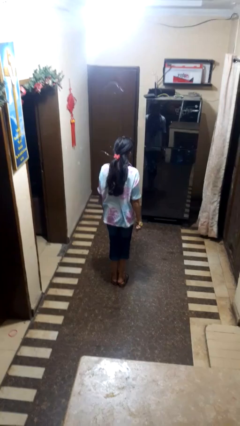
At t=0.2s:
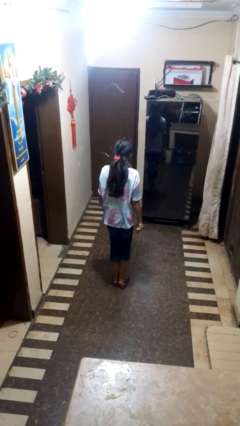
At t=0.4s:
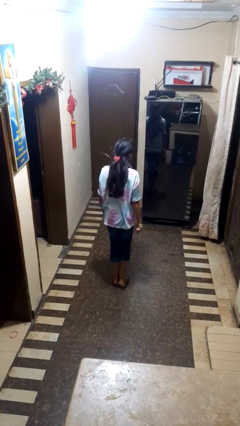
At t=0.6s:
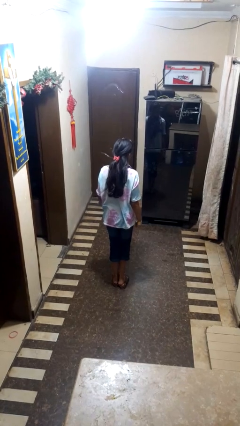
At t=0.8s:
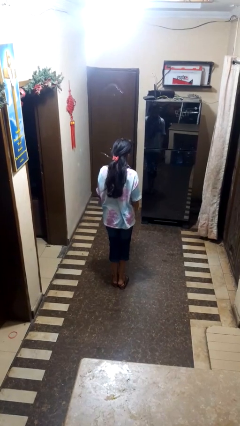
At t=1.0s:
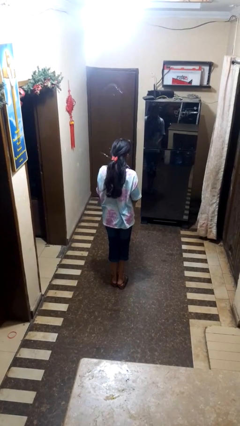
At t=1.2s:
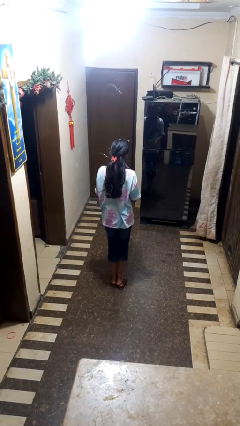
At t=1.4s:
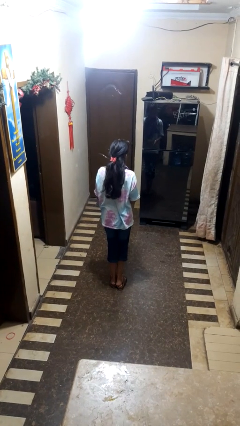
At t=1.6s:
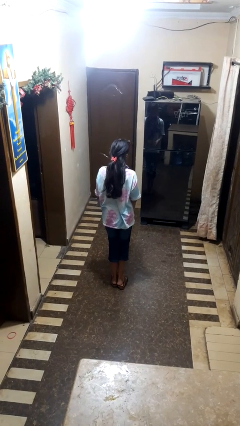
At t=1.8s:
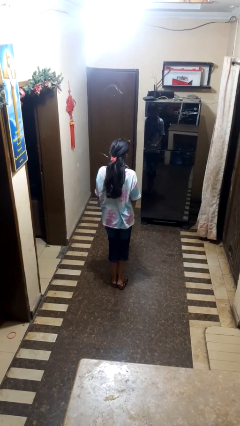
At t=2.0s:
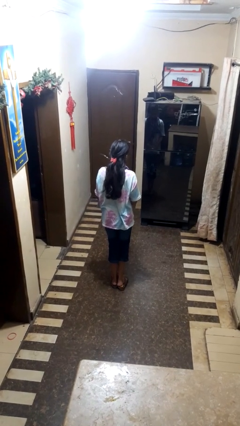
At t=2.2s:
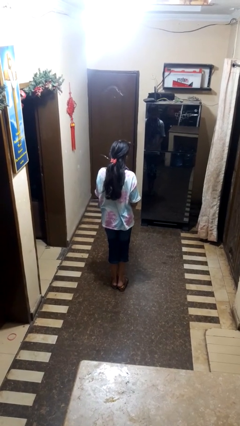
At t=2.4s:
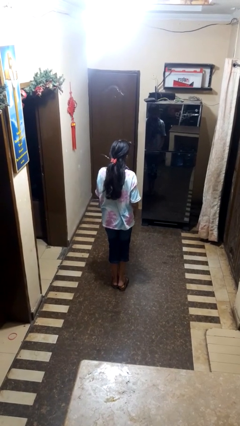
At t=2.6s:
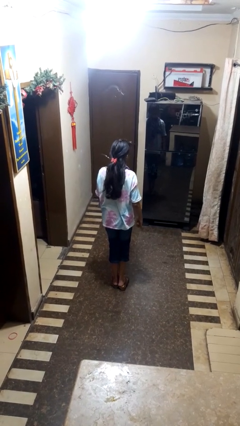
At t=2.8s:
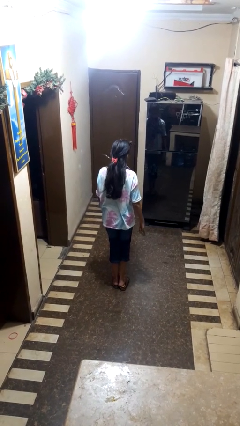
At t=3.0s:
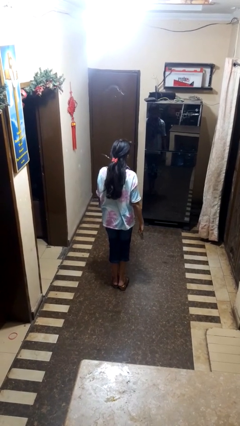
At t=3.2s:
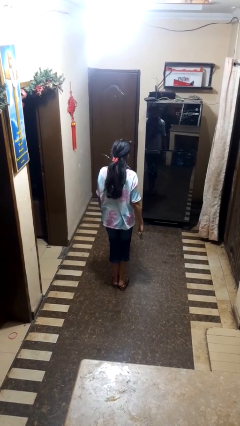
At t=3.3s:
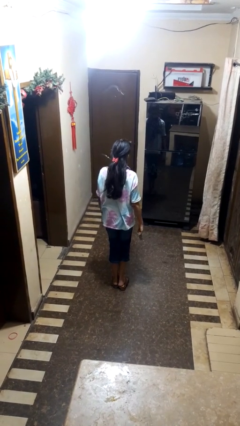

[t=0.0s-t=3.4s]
person takes off wristwatch

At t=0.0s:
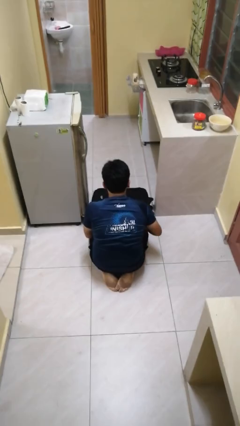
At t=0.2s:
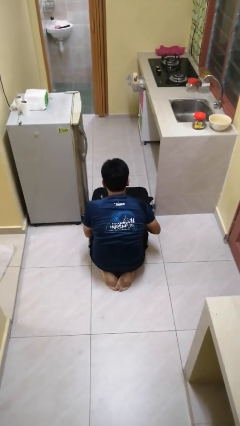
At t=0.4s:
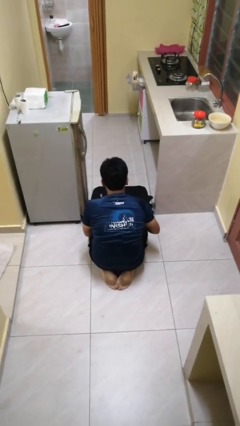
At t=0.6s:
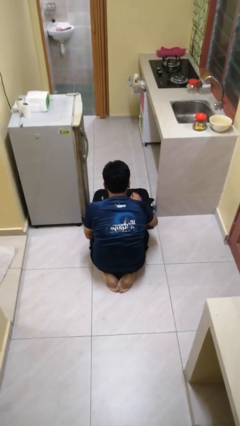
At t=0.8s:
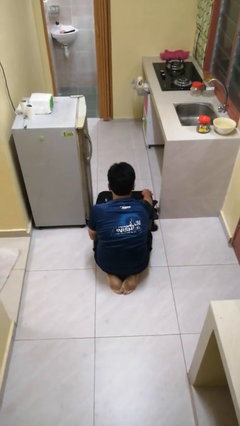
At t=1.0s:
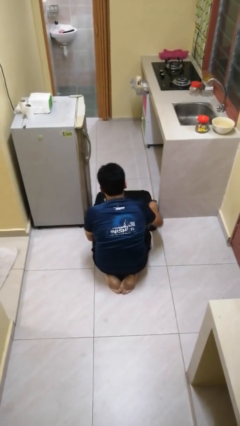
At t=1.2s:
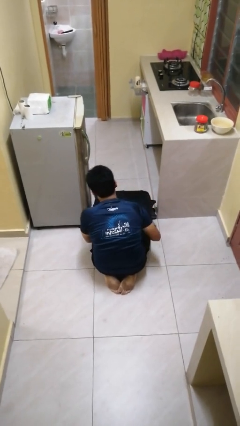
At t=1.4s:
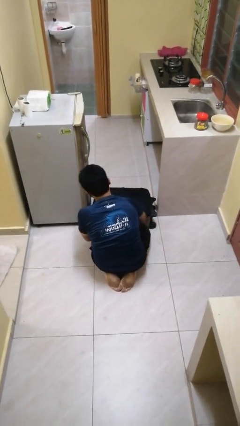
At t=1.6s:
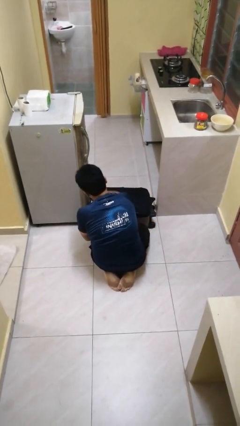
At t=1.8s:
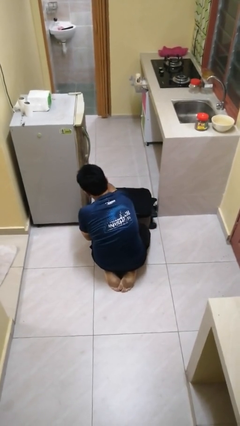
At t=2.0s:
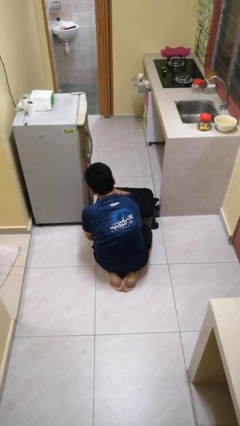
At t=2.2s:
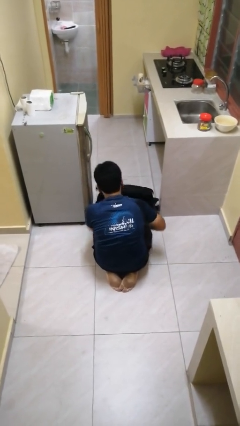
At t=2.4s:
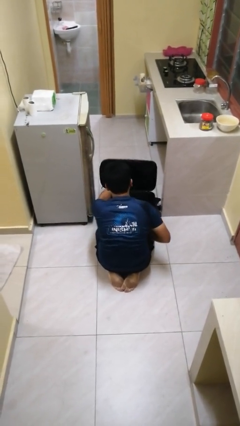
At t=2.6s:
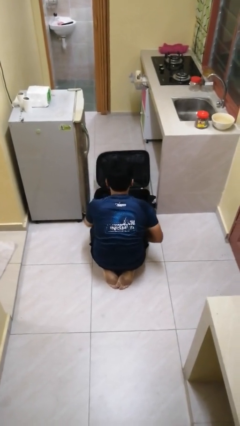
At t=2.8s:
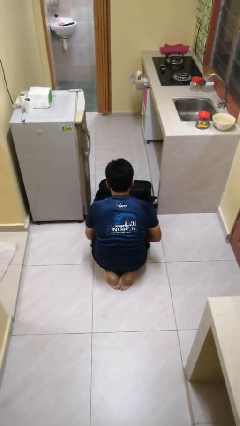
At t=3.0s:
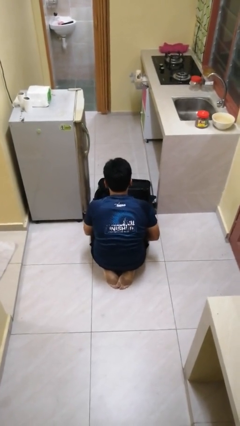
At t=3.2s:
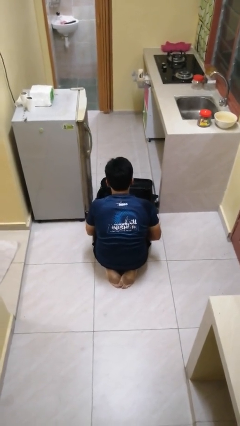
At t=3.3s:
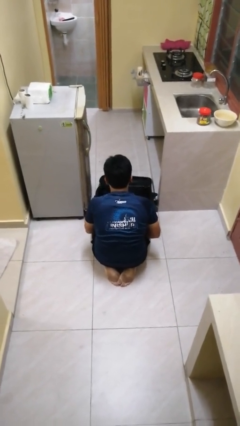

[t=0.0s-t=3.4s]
person opens suitcase

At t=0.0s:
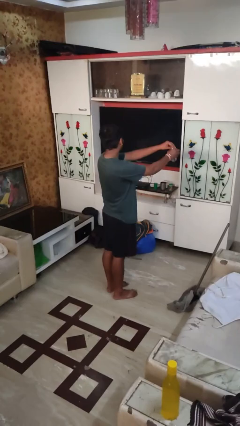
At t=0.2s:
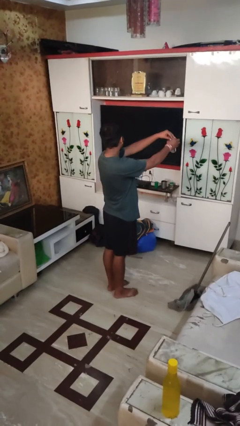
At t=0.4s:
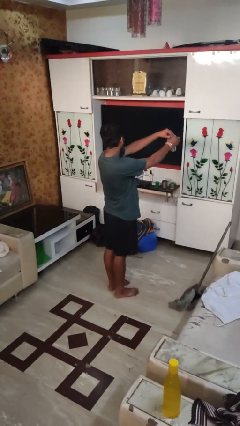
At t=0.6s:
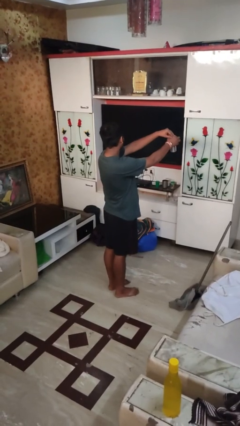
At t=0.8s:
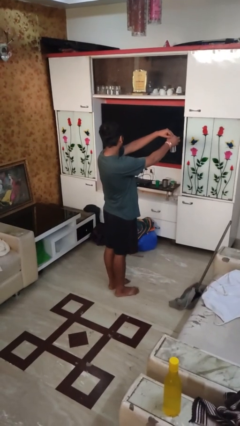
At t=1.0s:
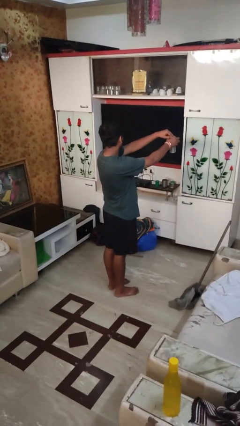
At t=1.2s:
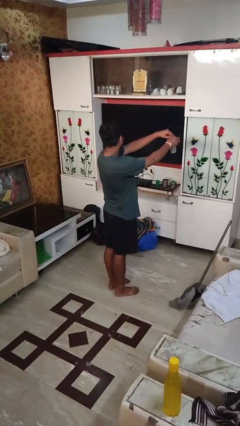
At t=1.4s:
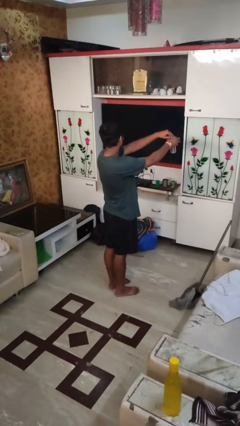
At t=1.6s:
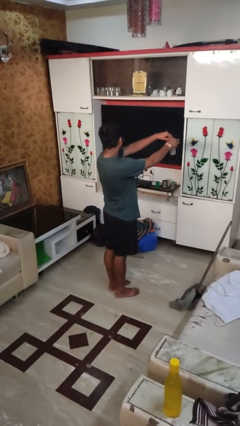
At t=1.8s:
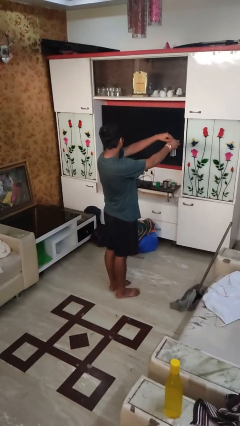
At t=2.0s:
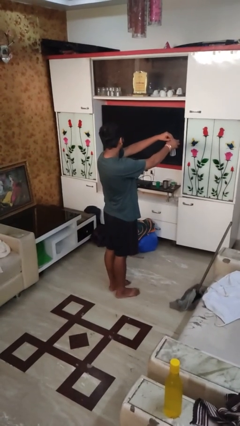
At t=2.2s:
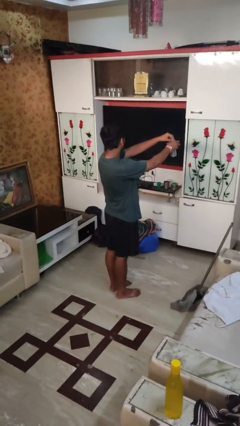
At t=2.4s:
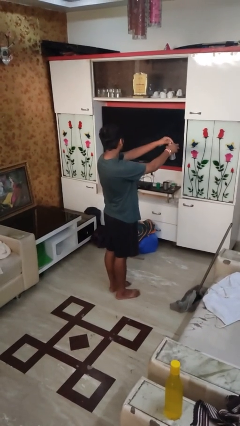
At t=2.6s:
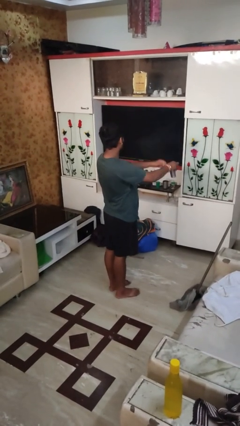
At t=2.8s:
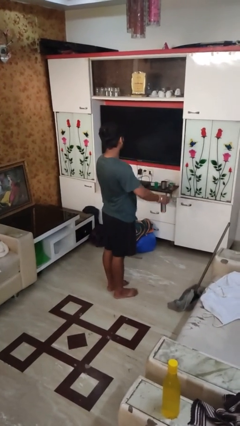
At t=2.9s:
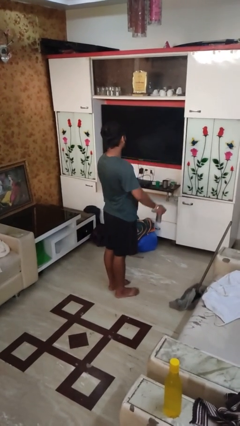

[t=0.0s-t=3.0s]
person opens beverage can

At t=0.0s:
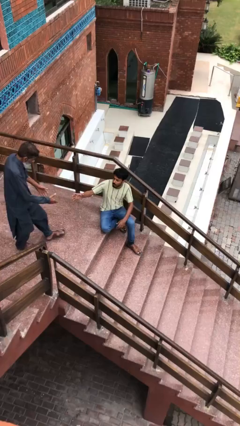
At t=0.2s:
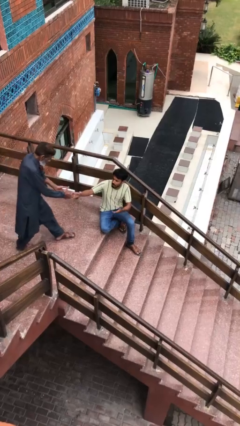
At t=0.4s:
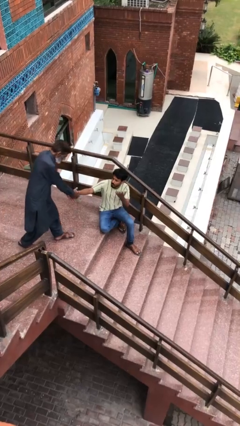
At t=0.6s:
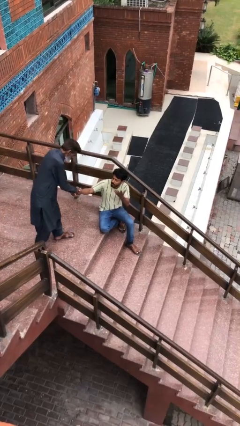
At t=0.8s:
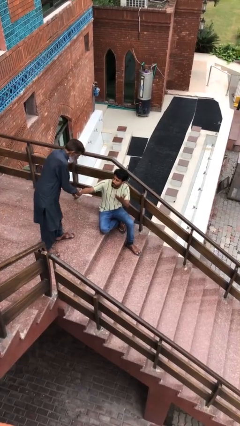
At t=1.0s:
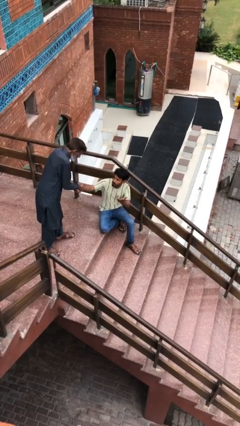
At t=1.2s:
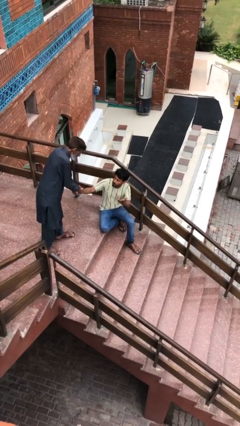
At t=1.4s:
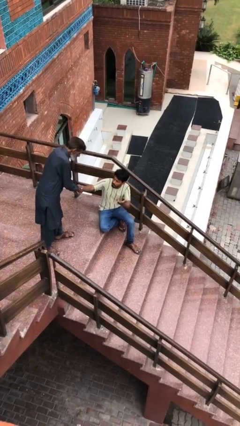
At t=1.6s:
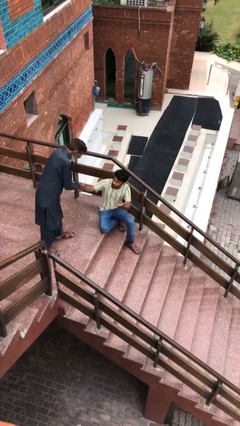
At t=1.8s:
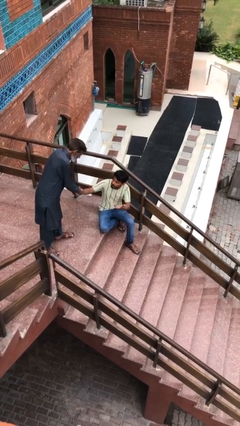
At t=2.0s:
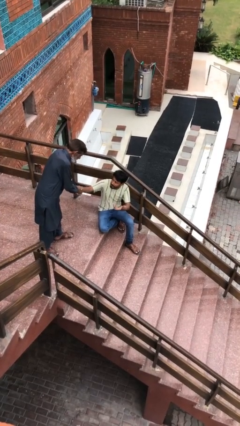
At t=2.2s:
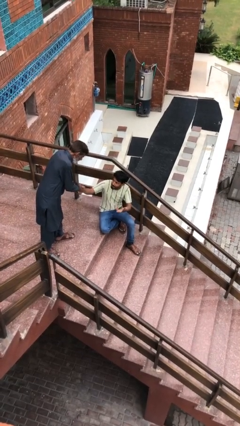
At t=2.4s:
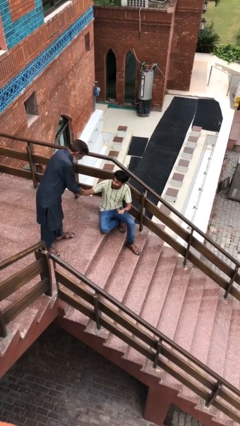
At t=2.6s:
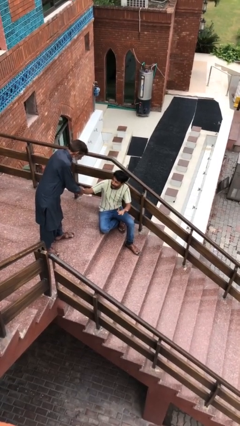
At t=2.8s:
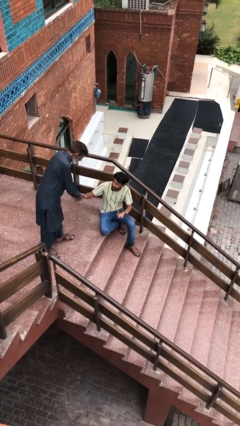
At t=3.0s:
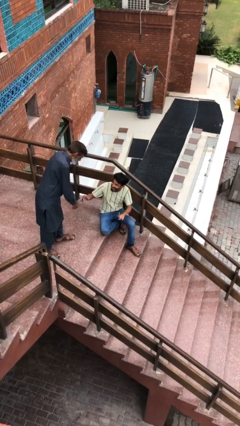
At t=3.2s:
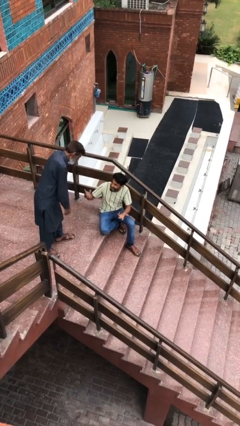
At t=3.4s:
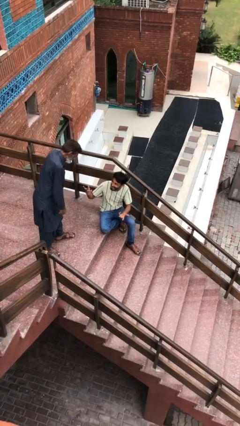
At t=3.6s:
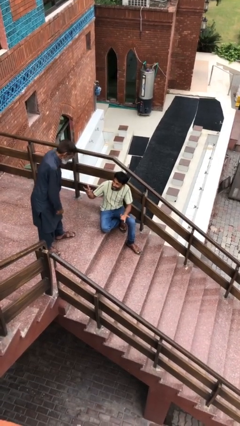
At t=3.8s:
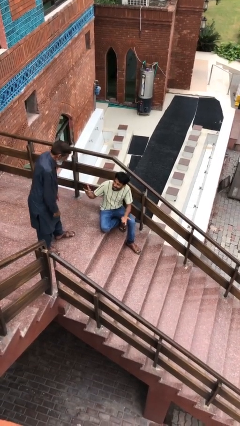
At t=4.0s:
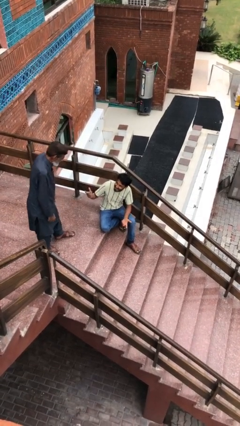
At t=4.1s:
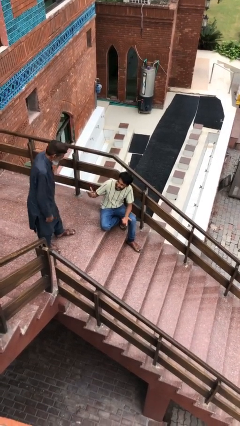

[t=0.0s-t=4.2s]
person shakes hand

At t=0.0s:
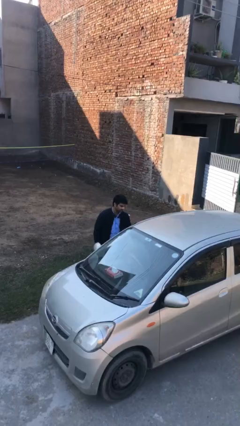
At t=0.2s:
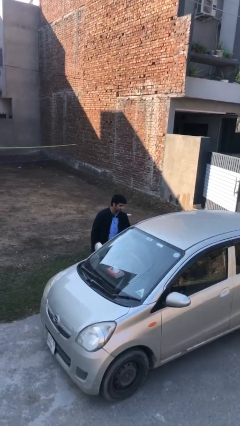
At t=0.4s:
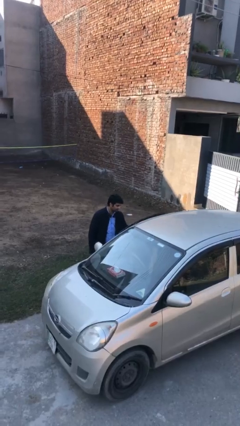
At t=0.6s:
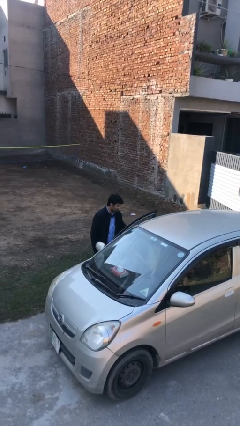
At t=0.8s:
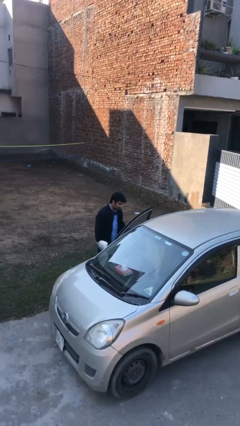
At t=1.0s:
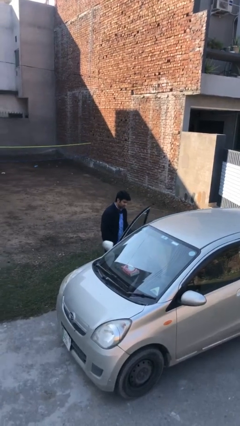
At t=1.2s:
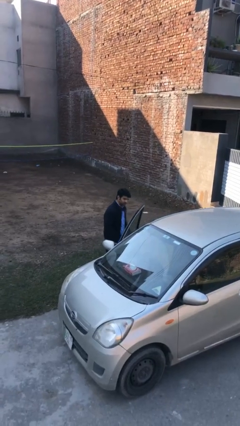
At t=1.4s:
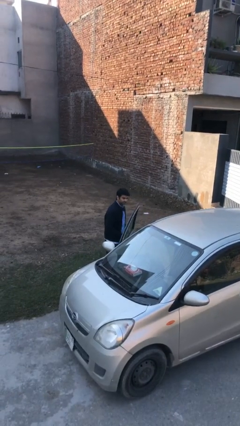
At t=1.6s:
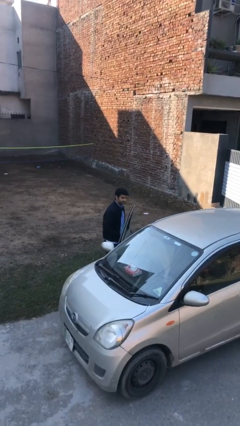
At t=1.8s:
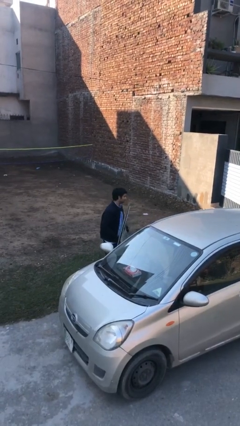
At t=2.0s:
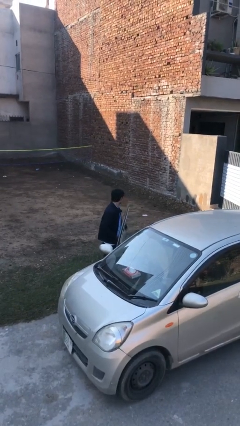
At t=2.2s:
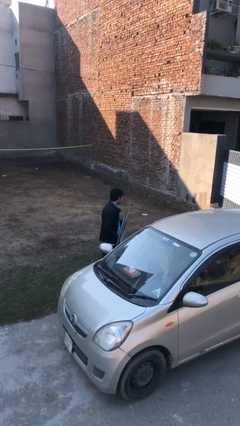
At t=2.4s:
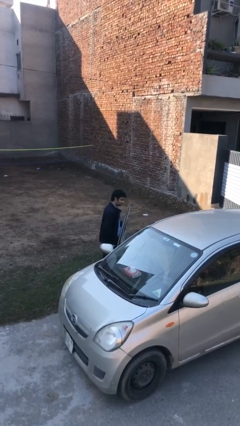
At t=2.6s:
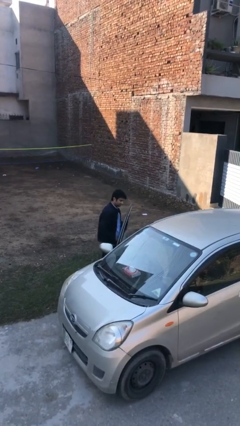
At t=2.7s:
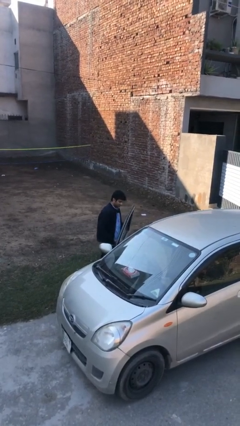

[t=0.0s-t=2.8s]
person opens car door

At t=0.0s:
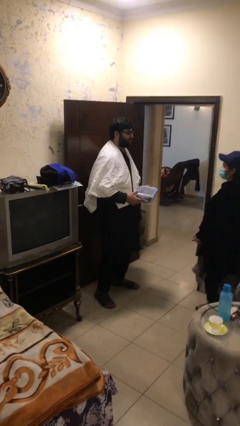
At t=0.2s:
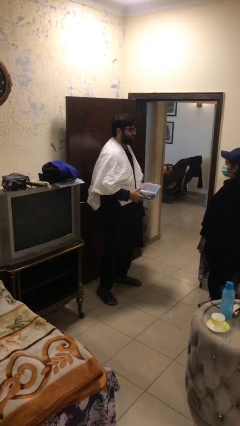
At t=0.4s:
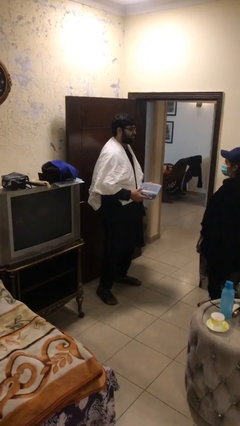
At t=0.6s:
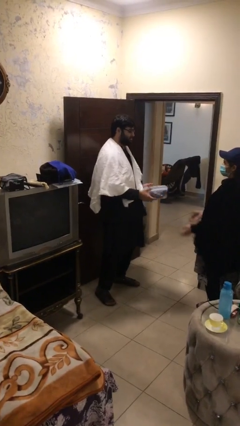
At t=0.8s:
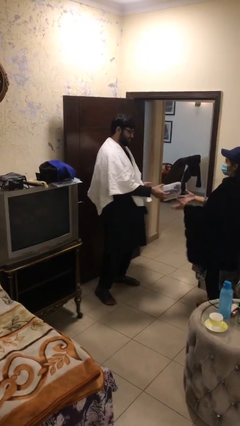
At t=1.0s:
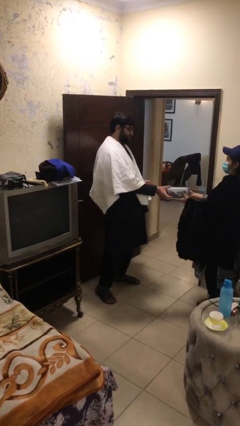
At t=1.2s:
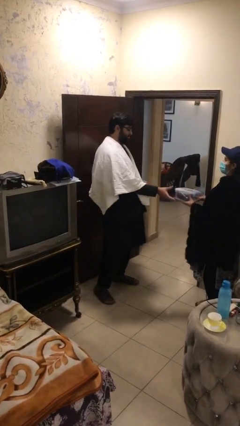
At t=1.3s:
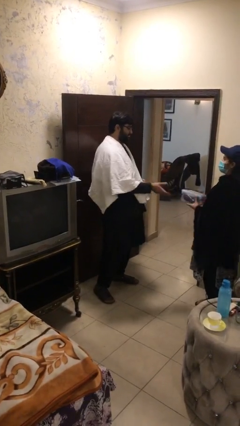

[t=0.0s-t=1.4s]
person transfers object to person
